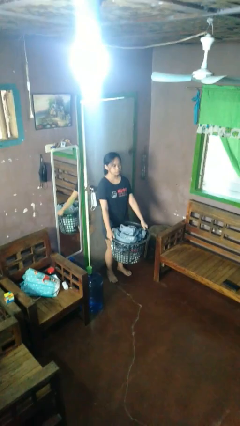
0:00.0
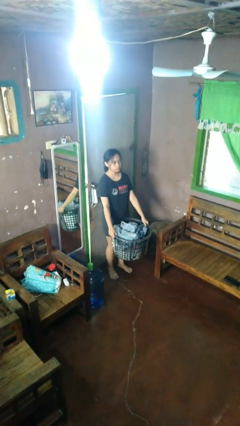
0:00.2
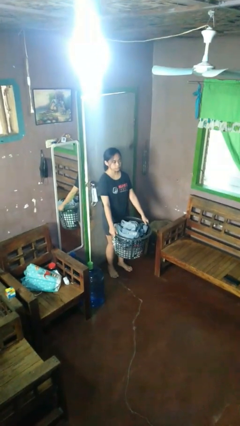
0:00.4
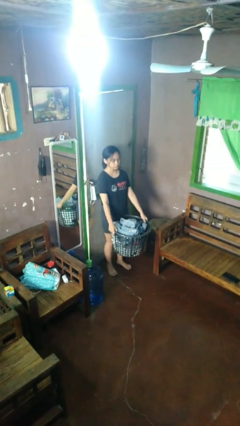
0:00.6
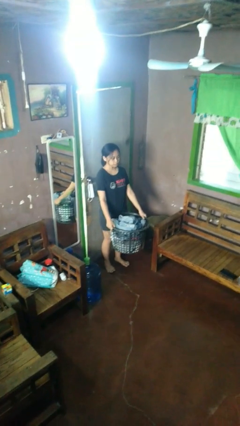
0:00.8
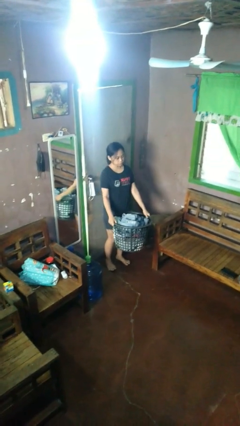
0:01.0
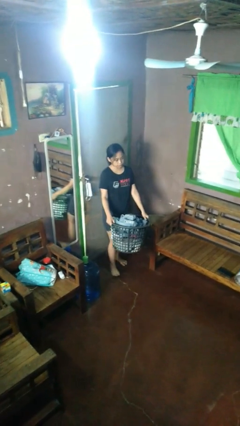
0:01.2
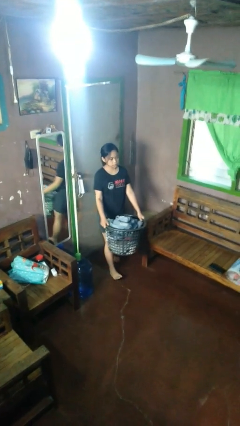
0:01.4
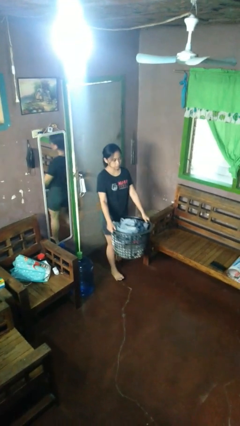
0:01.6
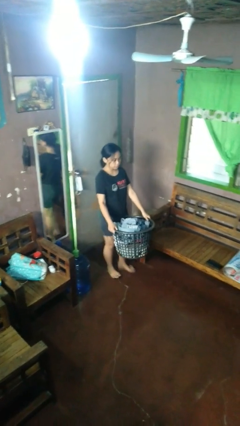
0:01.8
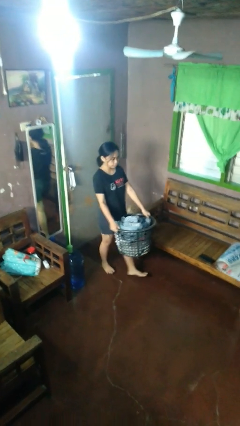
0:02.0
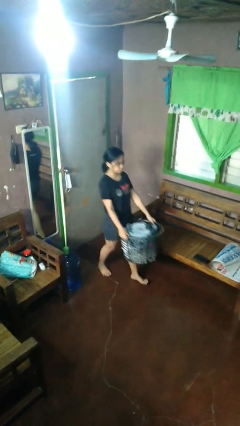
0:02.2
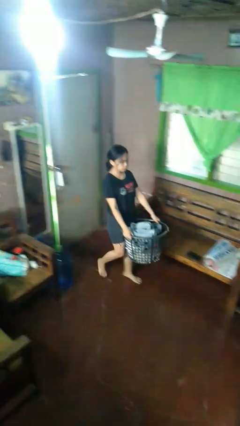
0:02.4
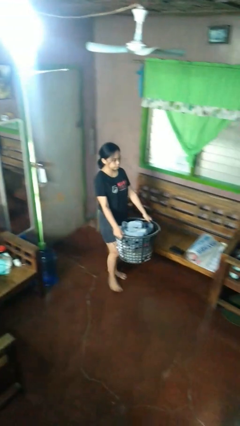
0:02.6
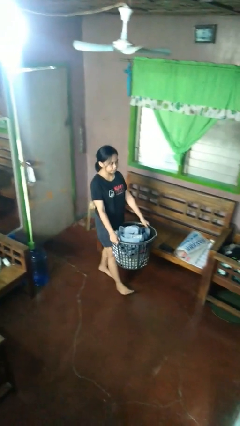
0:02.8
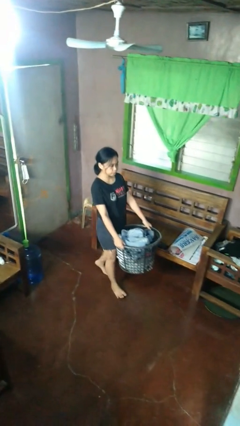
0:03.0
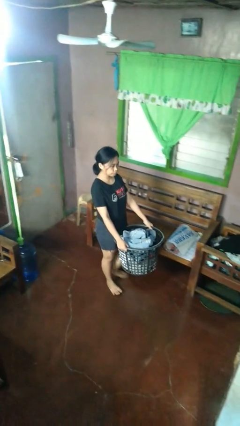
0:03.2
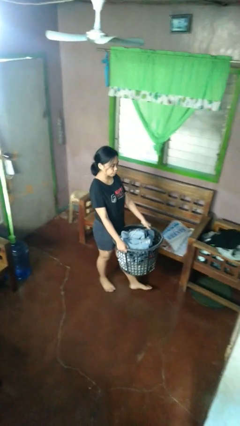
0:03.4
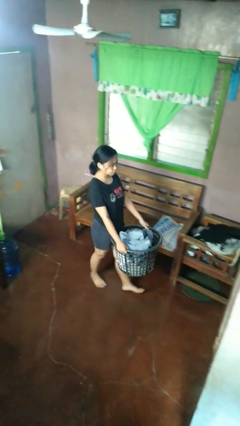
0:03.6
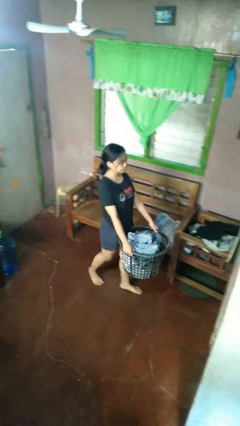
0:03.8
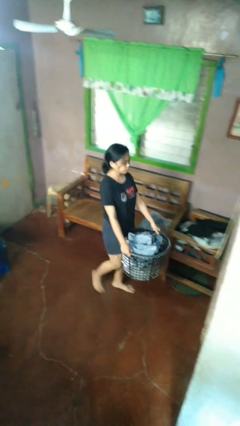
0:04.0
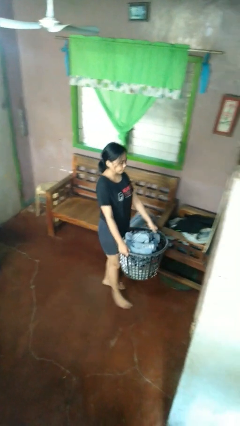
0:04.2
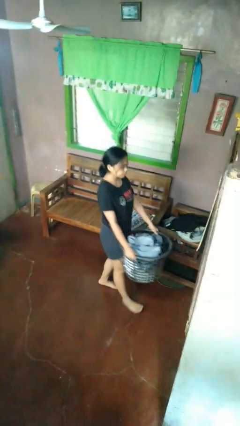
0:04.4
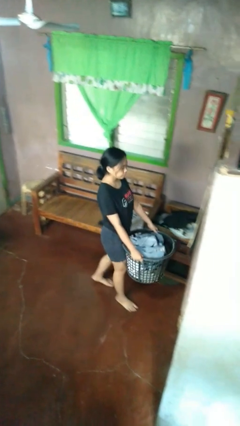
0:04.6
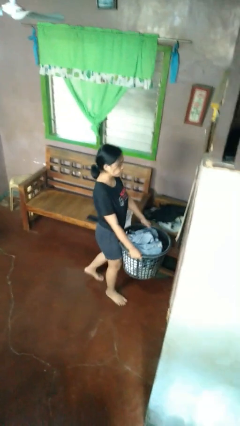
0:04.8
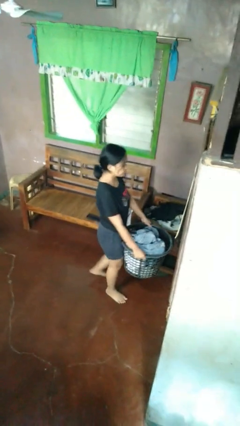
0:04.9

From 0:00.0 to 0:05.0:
person carries laundry basket

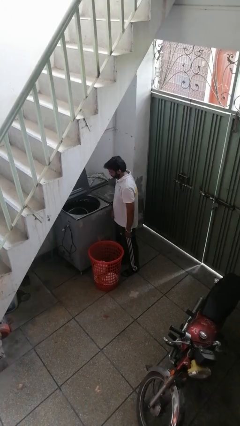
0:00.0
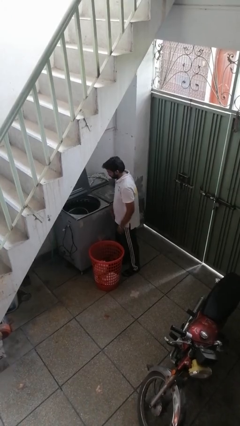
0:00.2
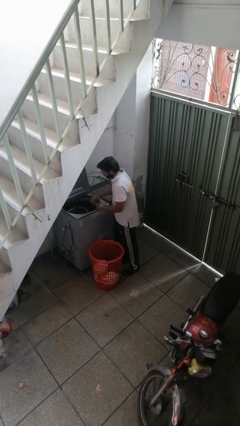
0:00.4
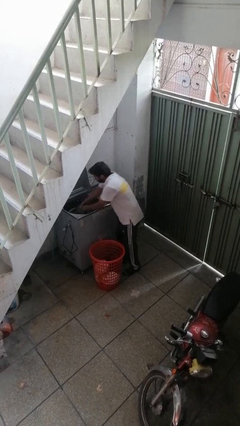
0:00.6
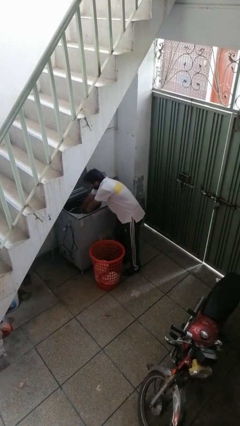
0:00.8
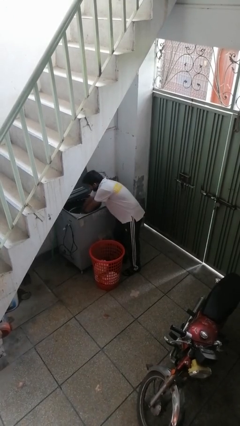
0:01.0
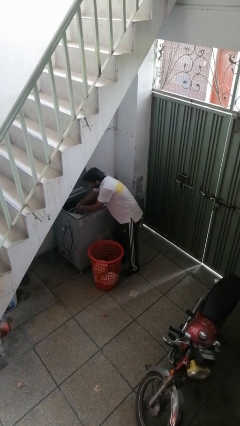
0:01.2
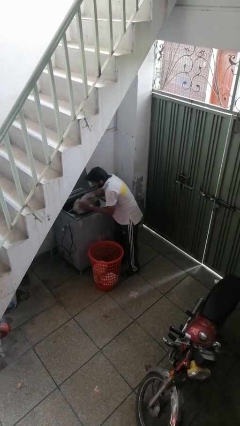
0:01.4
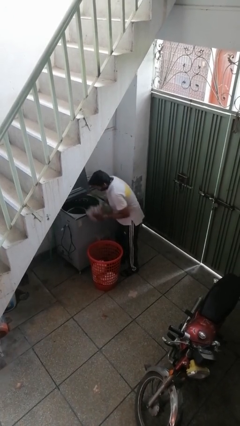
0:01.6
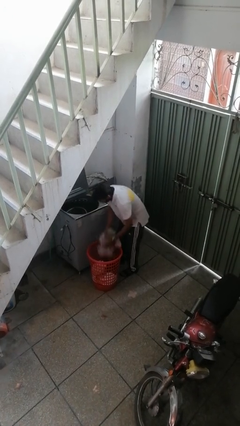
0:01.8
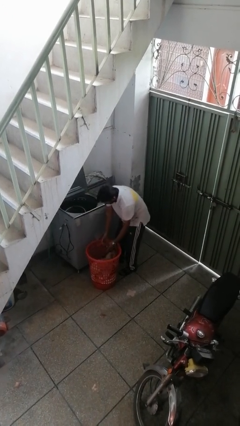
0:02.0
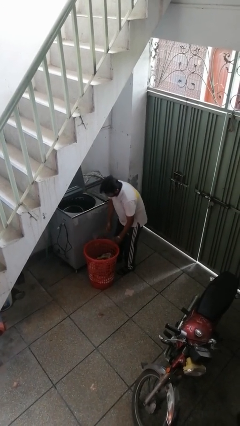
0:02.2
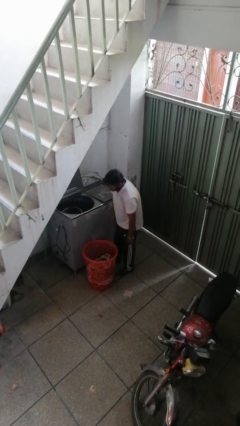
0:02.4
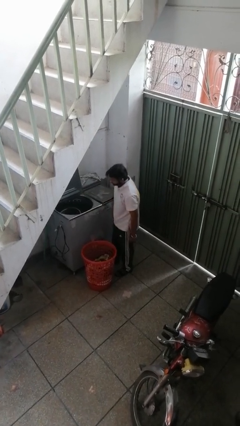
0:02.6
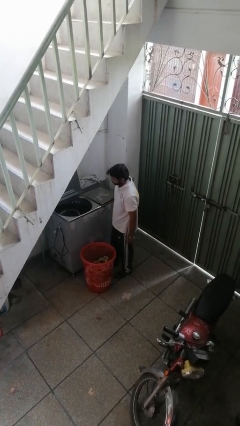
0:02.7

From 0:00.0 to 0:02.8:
person loads clotheswasher

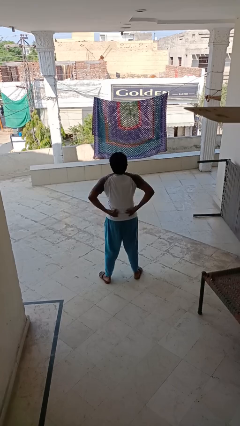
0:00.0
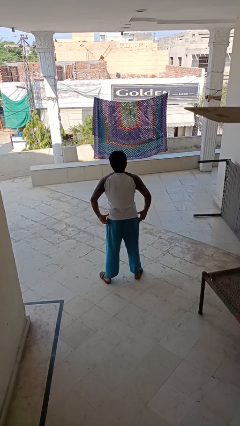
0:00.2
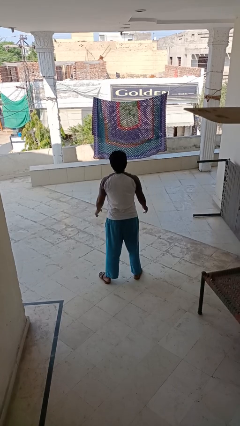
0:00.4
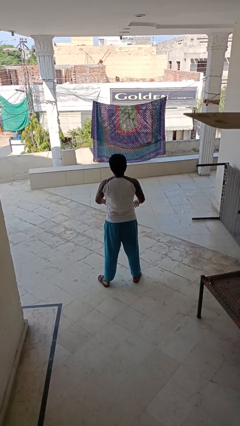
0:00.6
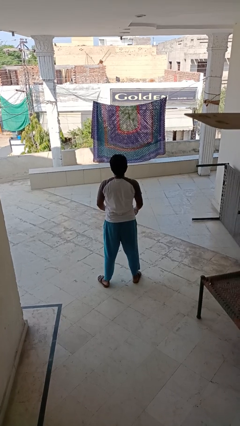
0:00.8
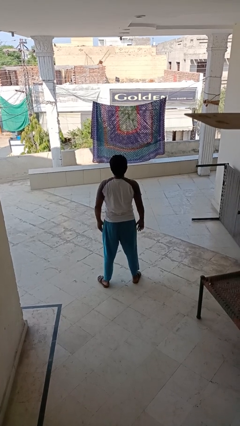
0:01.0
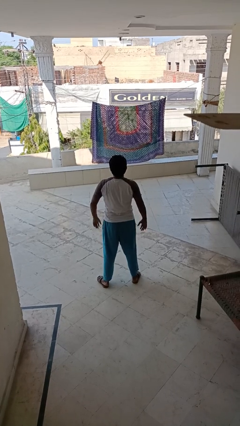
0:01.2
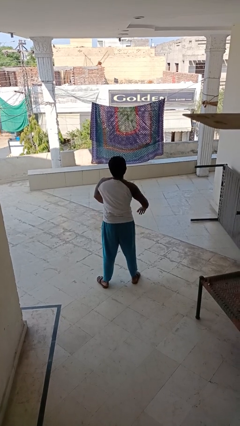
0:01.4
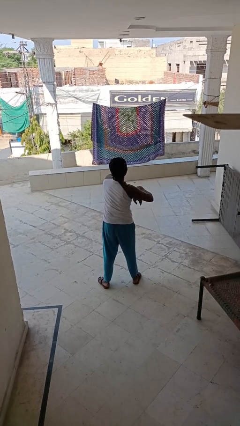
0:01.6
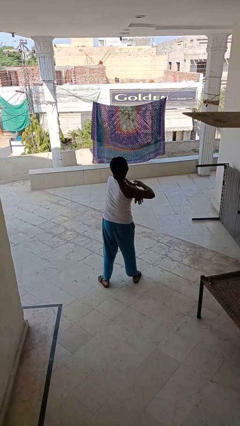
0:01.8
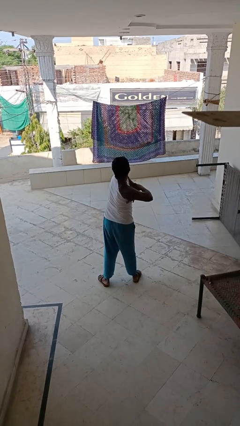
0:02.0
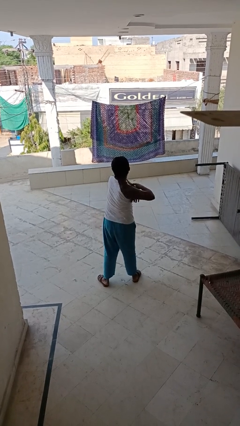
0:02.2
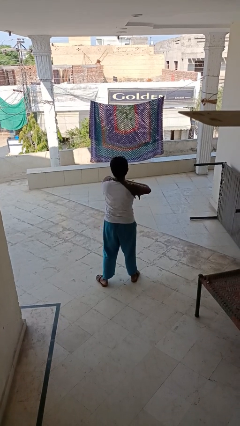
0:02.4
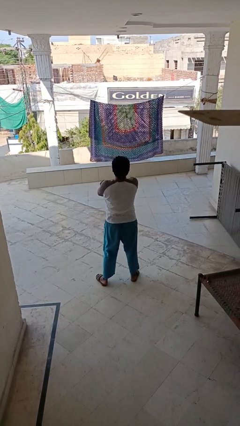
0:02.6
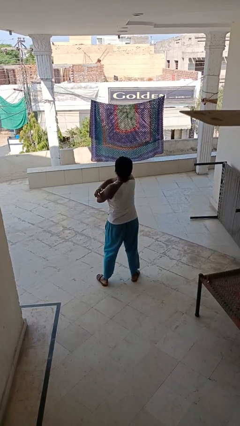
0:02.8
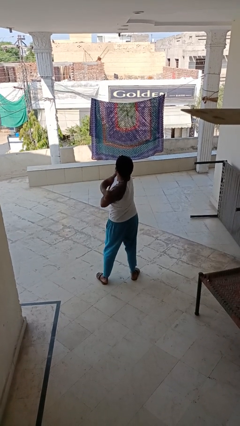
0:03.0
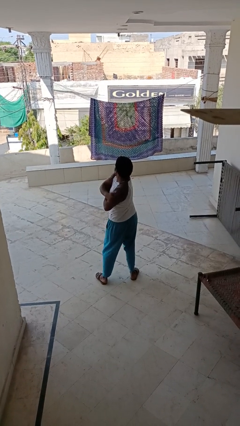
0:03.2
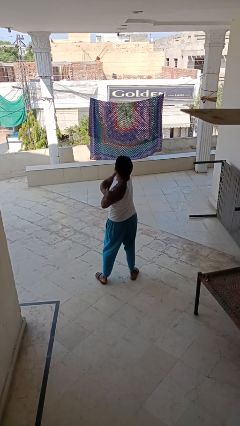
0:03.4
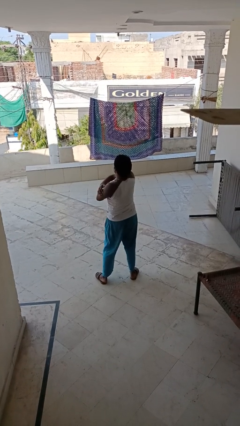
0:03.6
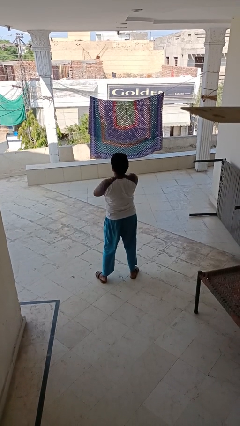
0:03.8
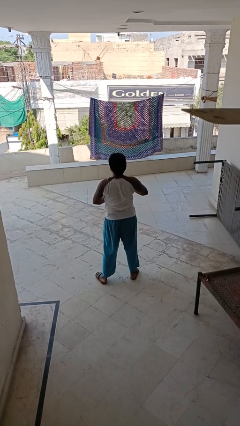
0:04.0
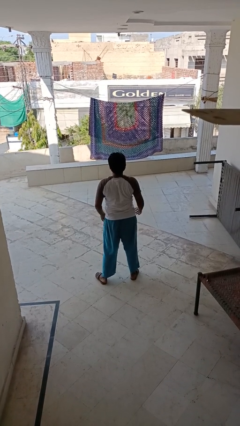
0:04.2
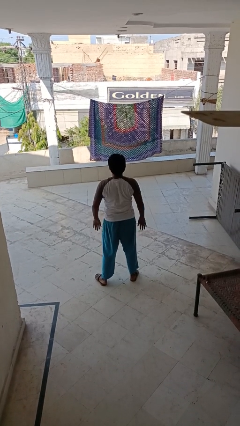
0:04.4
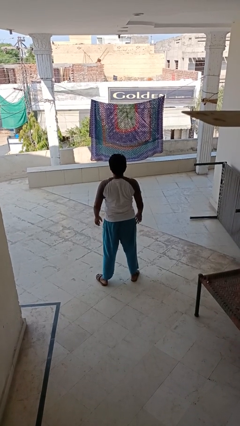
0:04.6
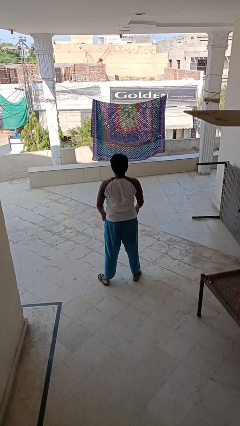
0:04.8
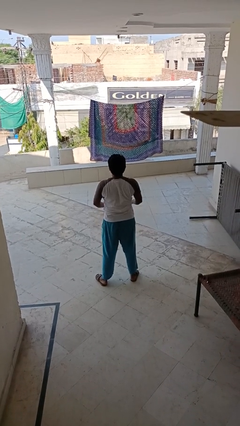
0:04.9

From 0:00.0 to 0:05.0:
person stretches arms to side

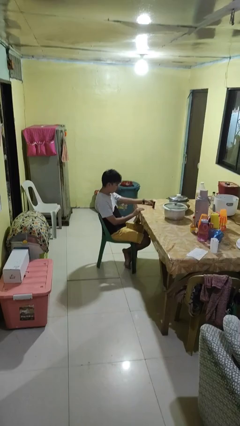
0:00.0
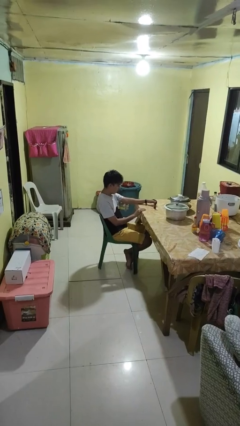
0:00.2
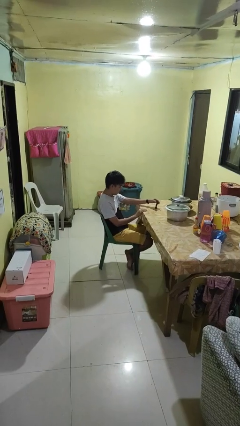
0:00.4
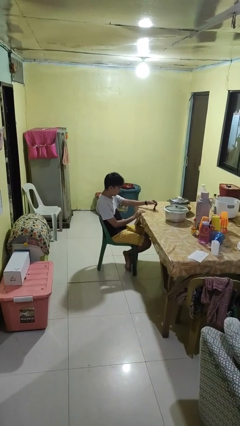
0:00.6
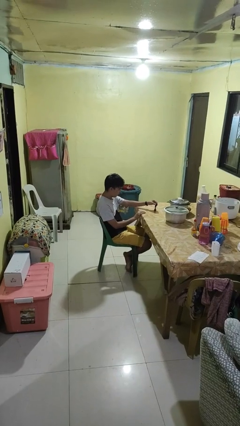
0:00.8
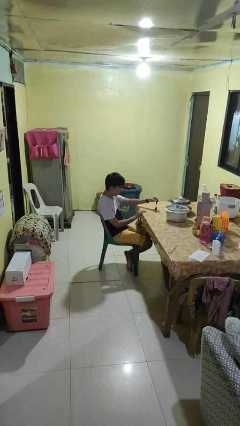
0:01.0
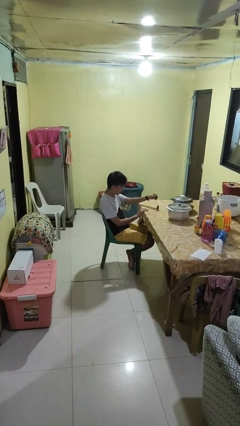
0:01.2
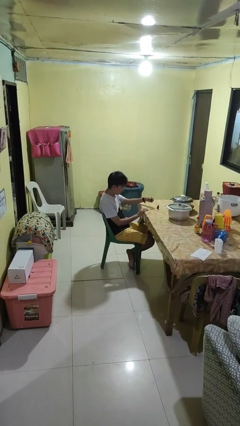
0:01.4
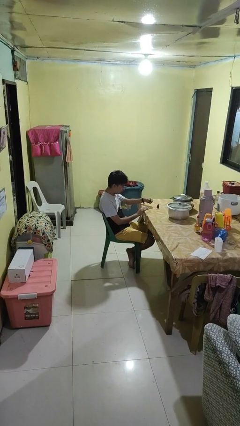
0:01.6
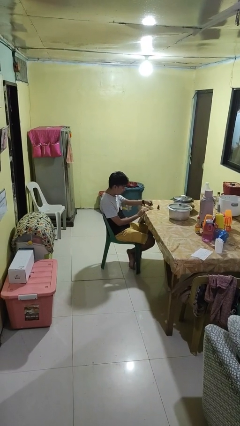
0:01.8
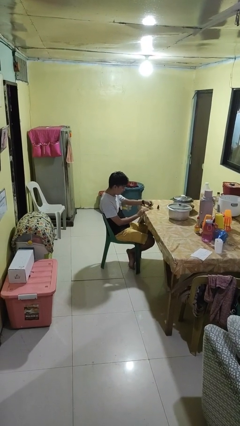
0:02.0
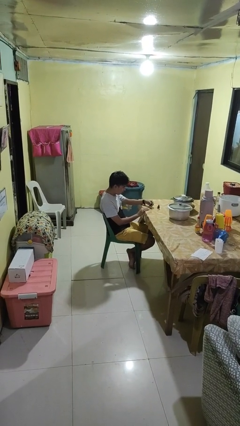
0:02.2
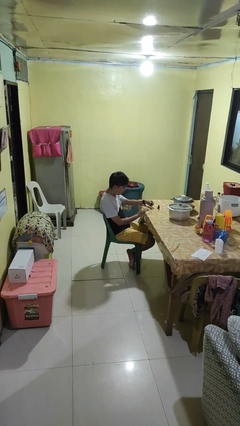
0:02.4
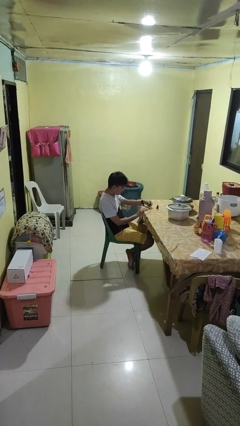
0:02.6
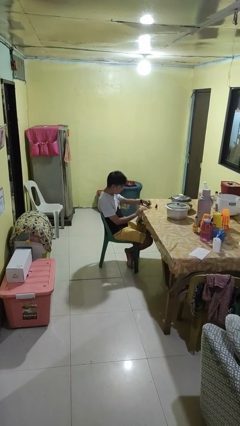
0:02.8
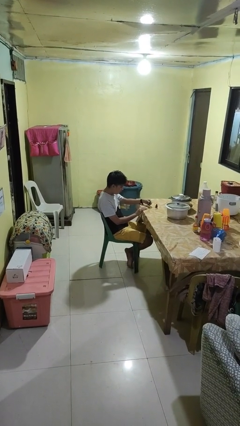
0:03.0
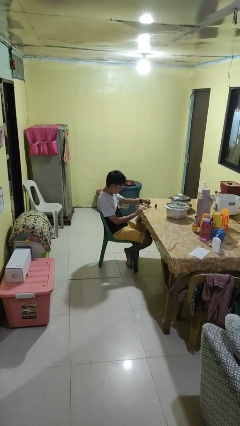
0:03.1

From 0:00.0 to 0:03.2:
person paints fingernails

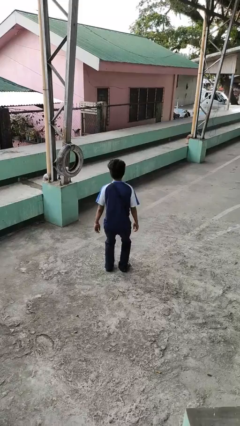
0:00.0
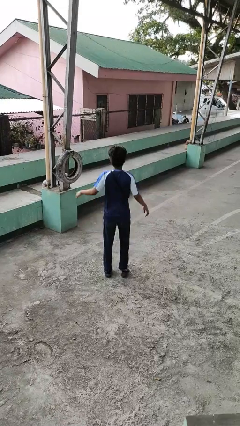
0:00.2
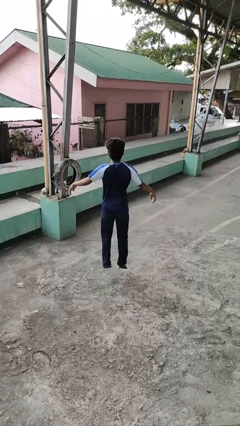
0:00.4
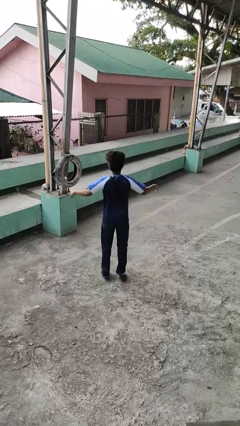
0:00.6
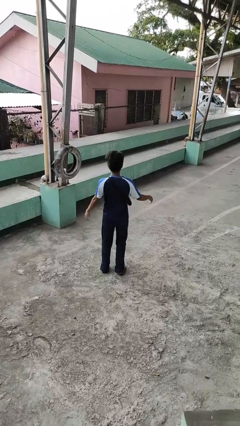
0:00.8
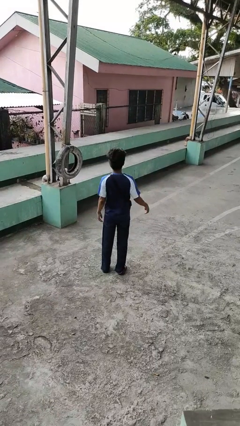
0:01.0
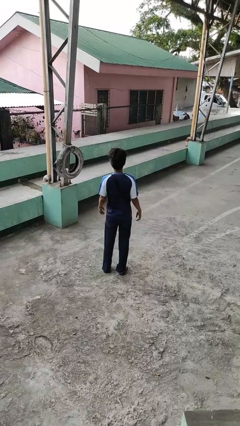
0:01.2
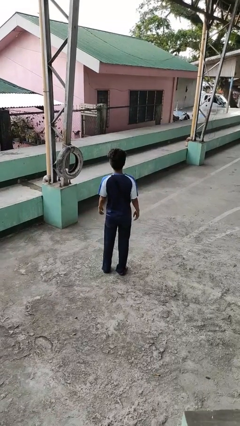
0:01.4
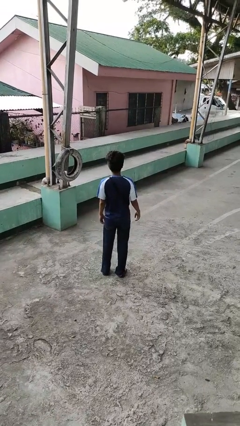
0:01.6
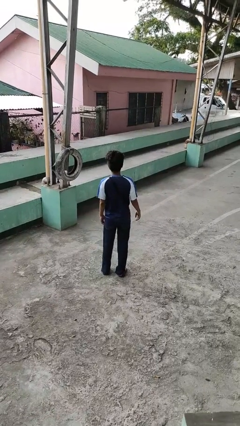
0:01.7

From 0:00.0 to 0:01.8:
person jumps

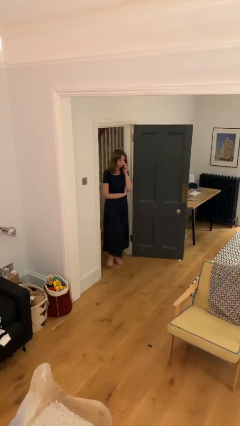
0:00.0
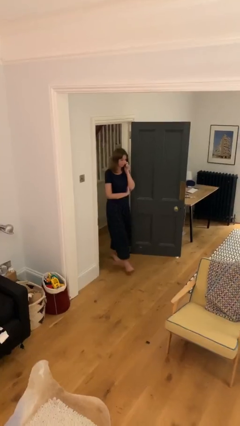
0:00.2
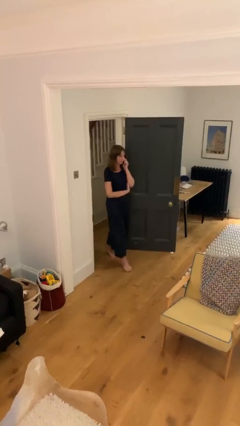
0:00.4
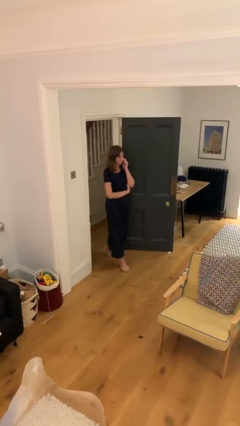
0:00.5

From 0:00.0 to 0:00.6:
person enters scene through structure
